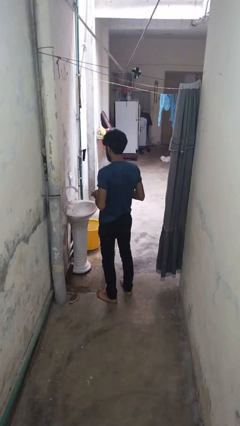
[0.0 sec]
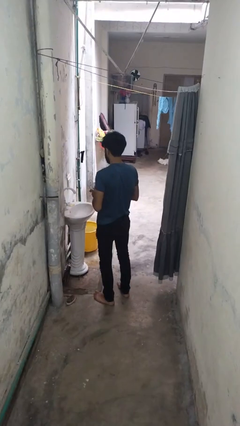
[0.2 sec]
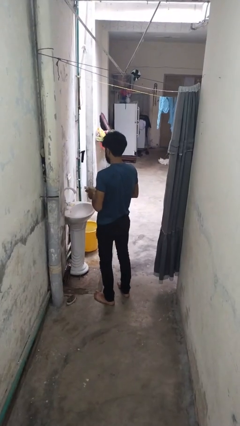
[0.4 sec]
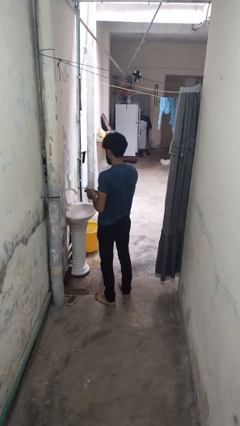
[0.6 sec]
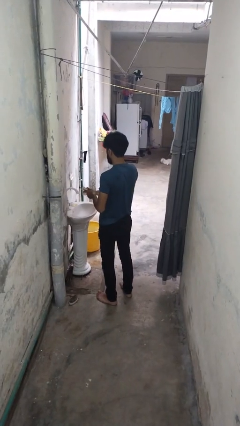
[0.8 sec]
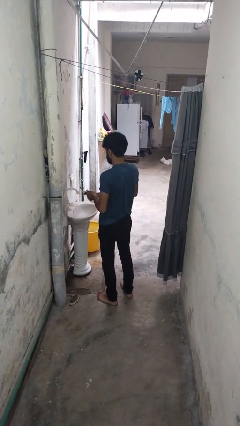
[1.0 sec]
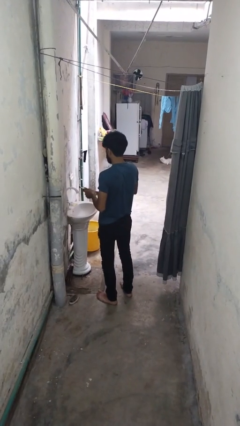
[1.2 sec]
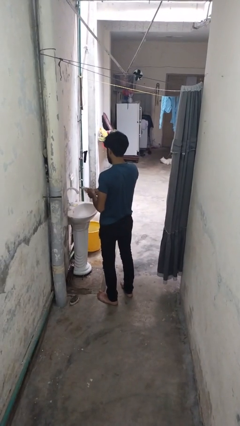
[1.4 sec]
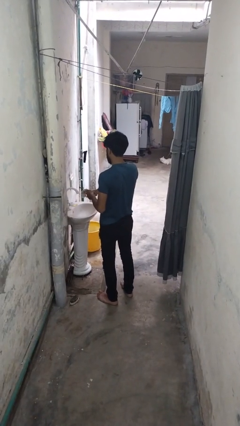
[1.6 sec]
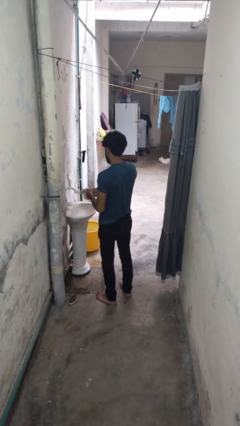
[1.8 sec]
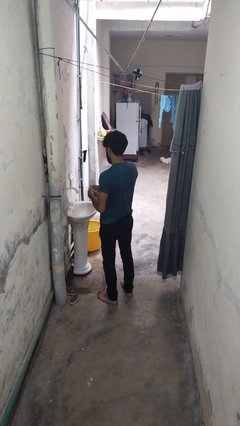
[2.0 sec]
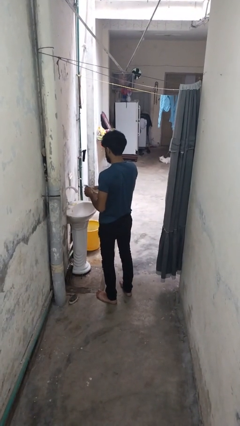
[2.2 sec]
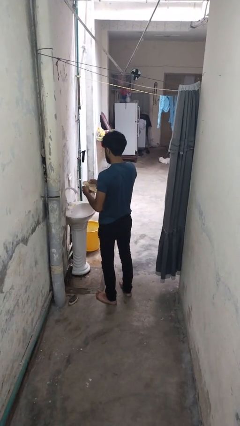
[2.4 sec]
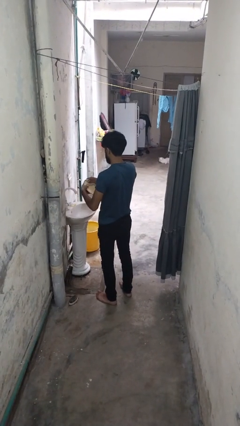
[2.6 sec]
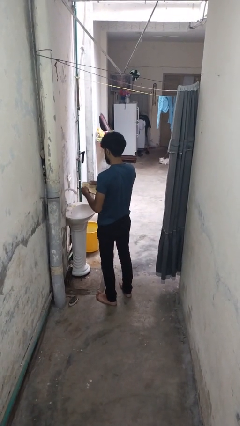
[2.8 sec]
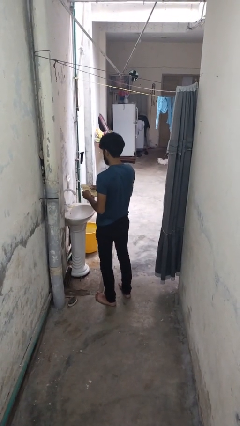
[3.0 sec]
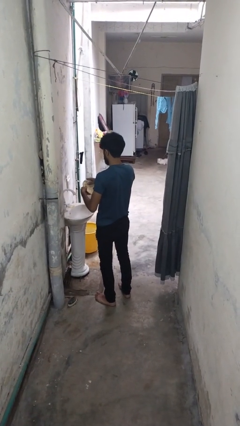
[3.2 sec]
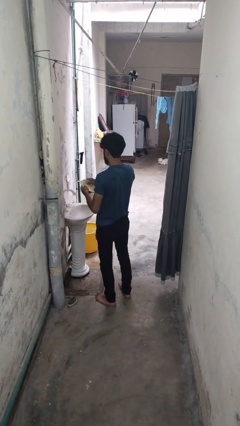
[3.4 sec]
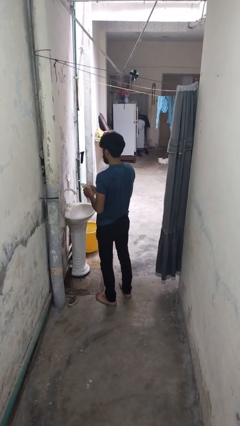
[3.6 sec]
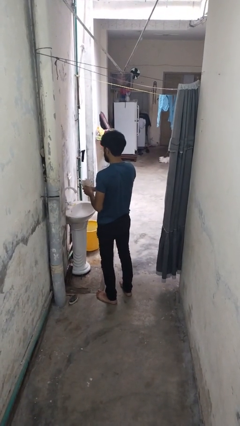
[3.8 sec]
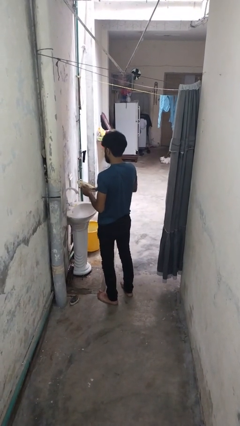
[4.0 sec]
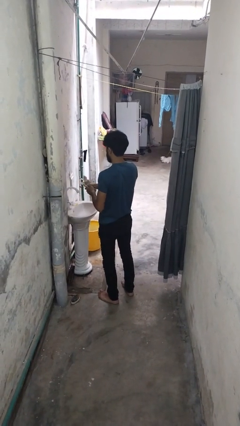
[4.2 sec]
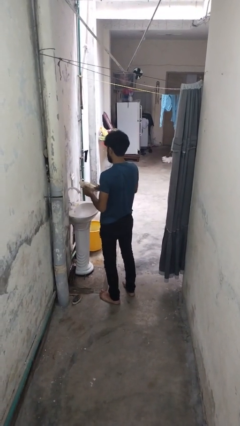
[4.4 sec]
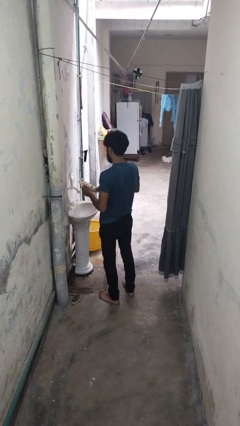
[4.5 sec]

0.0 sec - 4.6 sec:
person dries dish

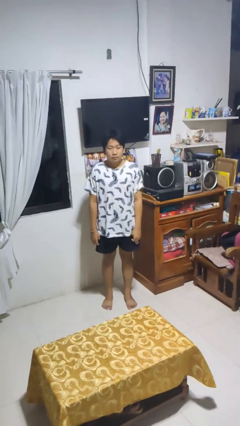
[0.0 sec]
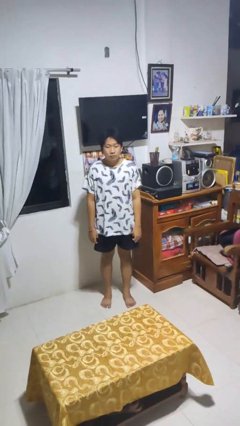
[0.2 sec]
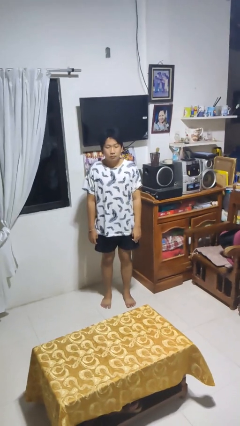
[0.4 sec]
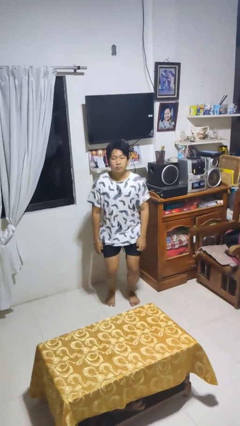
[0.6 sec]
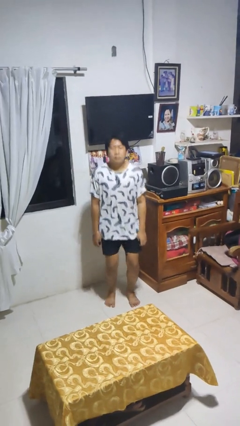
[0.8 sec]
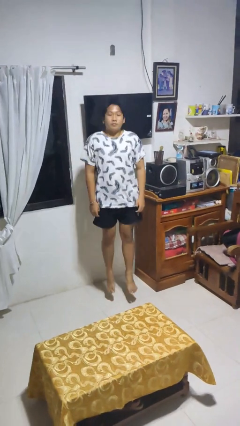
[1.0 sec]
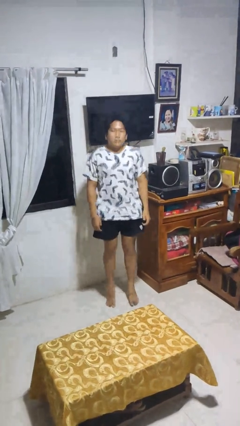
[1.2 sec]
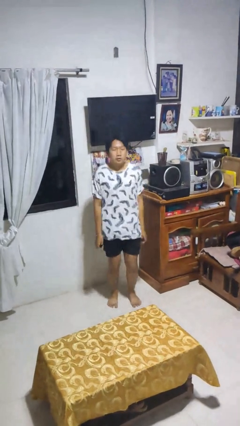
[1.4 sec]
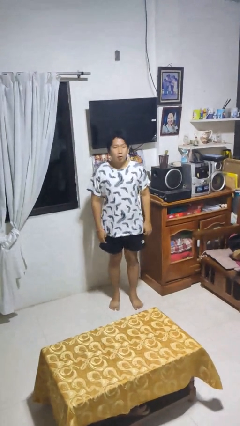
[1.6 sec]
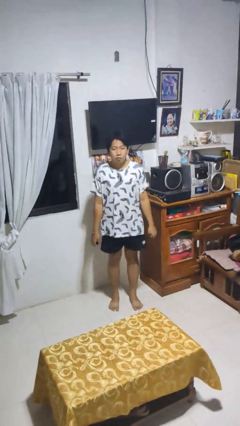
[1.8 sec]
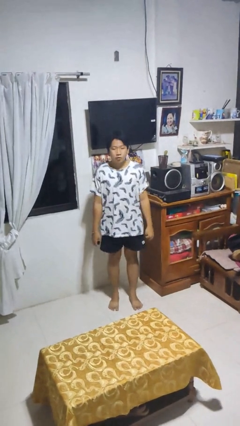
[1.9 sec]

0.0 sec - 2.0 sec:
person jumps

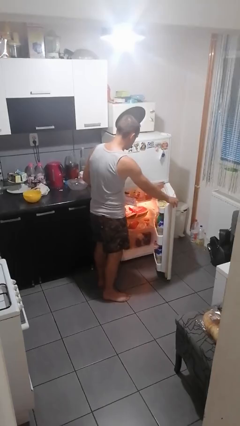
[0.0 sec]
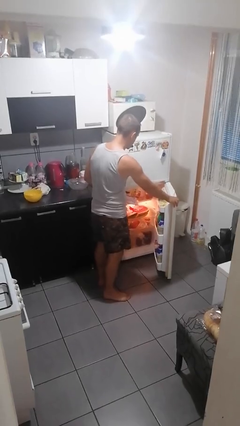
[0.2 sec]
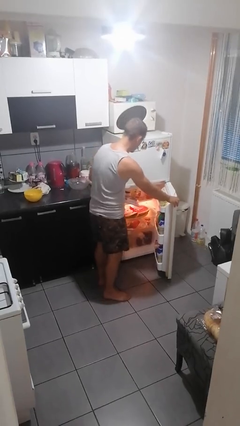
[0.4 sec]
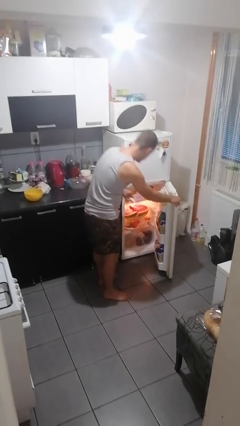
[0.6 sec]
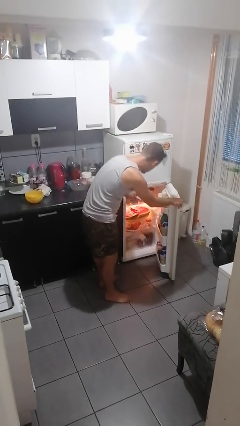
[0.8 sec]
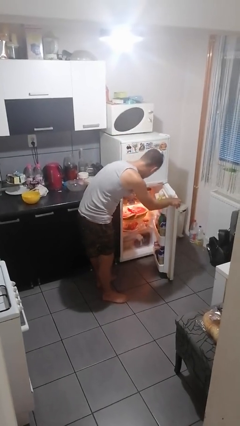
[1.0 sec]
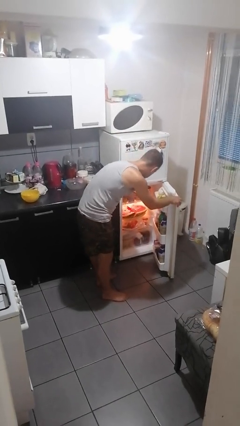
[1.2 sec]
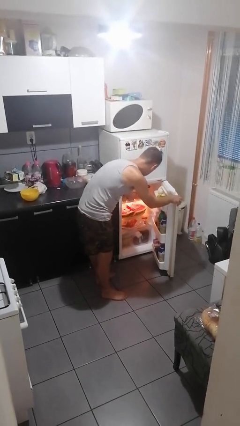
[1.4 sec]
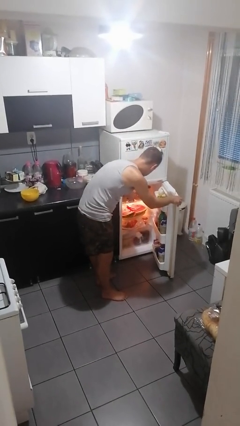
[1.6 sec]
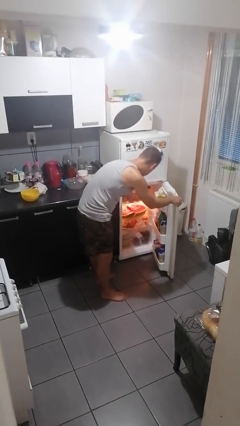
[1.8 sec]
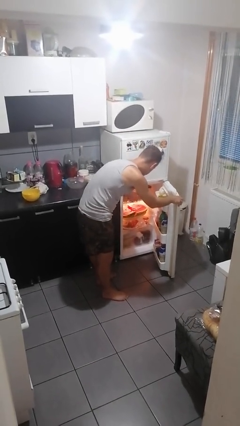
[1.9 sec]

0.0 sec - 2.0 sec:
person puts object into refrigerator

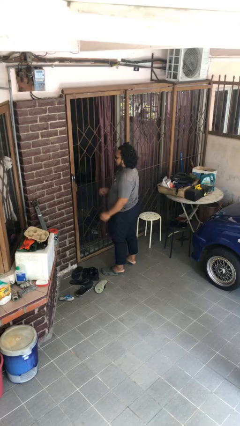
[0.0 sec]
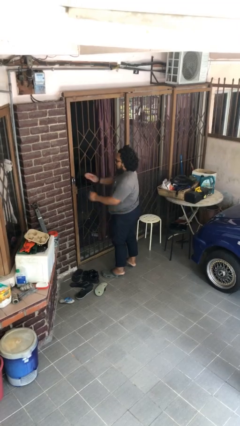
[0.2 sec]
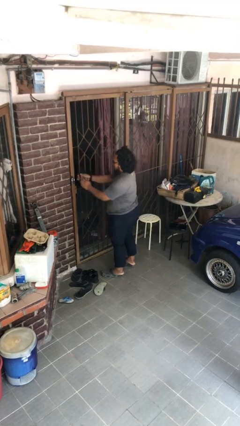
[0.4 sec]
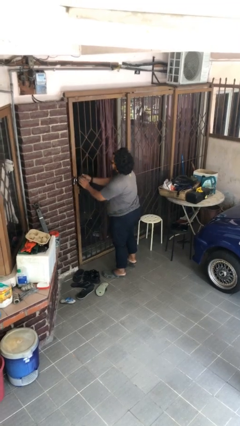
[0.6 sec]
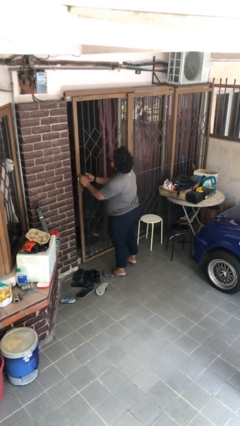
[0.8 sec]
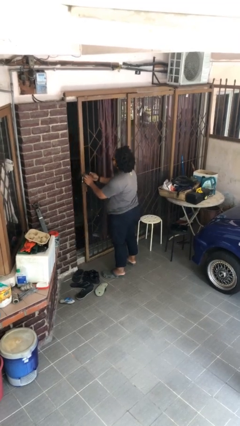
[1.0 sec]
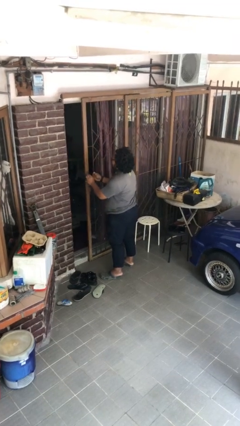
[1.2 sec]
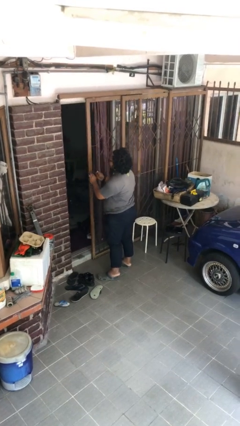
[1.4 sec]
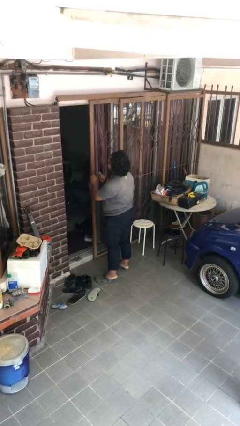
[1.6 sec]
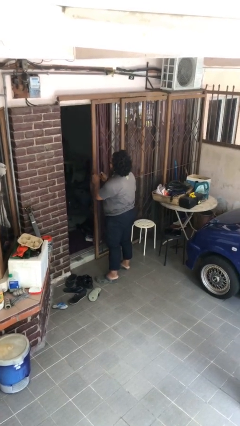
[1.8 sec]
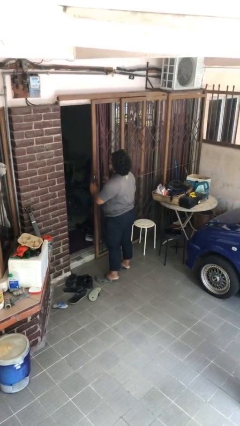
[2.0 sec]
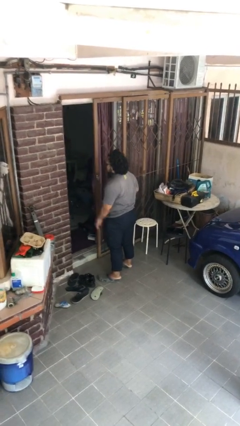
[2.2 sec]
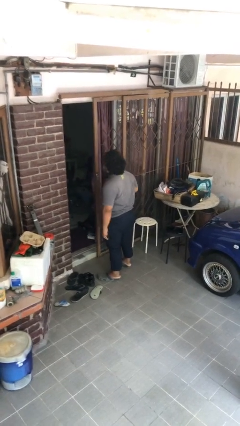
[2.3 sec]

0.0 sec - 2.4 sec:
person opens facility door

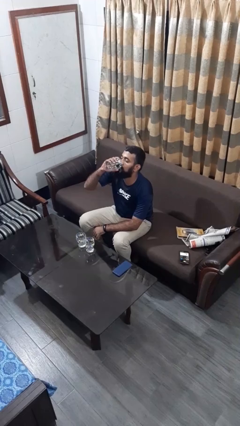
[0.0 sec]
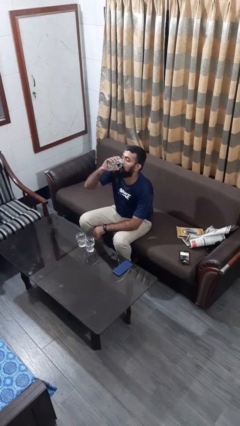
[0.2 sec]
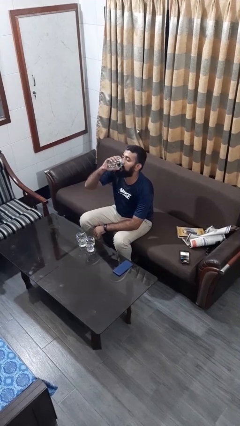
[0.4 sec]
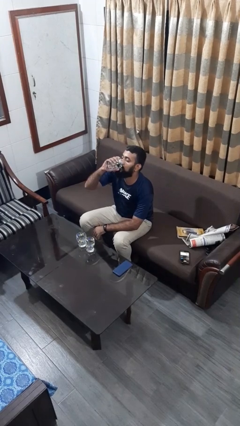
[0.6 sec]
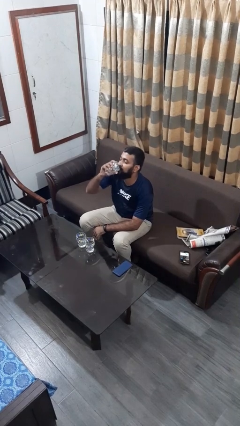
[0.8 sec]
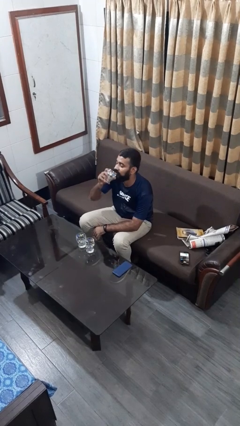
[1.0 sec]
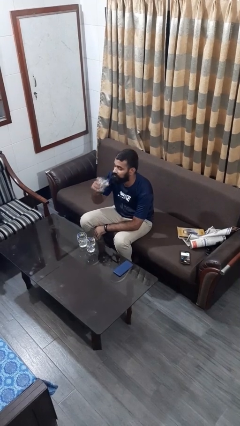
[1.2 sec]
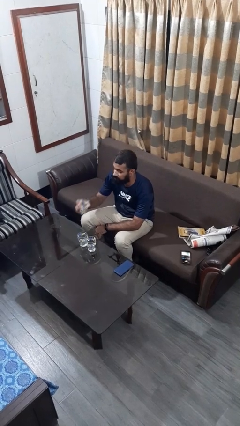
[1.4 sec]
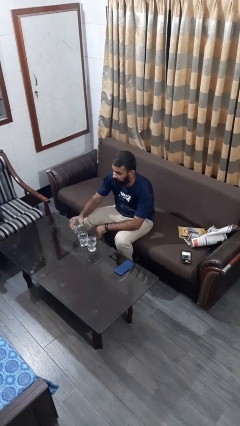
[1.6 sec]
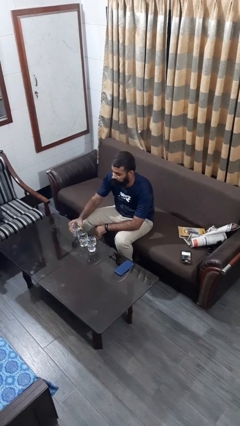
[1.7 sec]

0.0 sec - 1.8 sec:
person puts down object on table

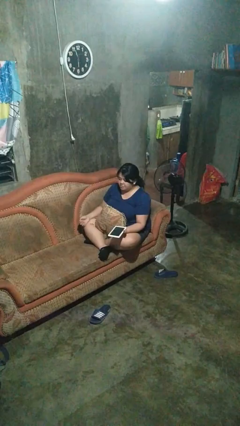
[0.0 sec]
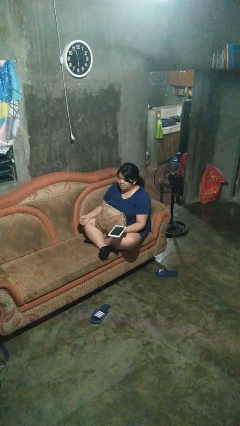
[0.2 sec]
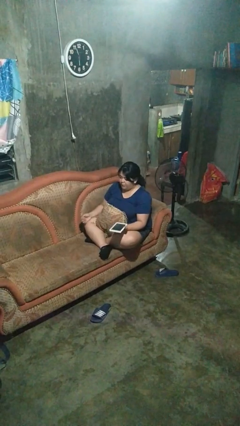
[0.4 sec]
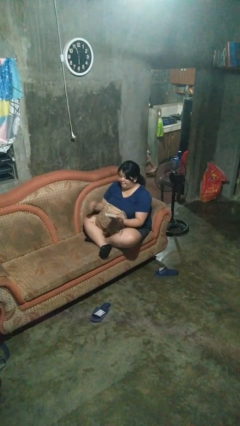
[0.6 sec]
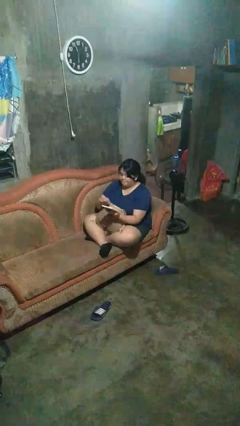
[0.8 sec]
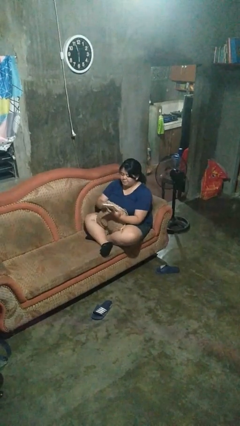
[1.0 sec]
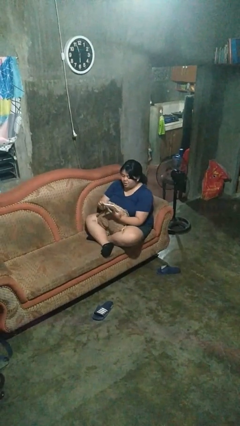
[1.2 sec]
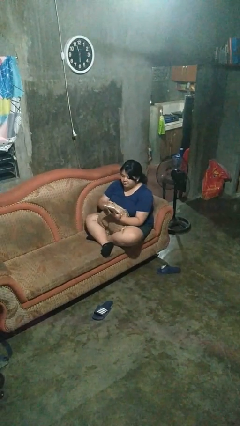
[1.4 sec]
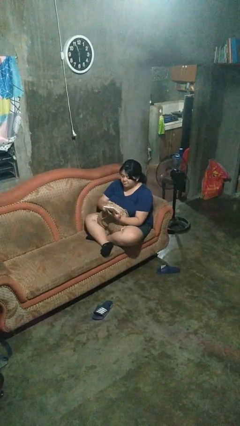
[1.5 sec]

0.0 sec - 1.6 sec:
person interacts with tablet

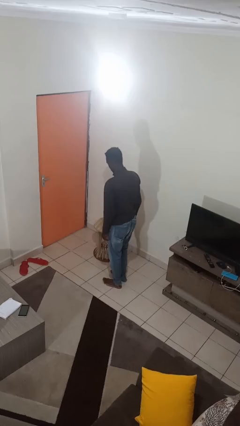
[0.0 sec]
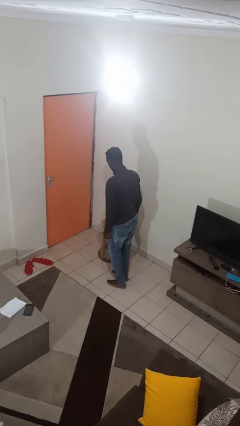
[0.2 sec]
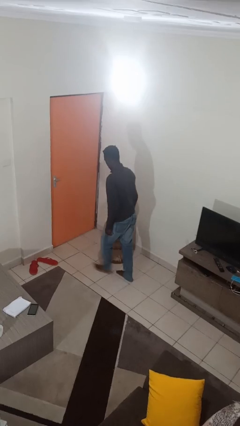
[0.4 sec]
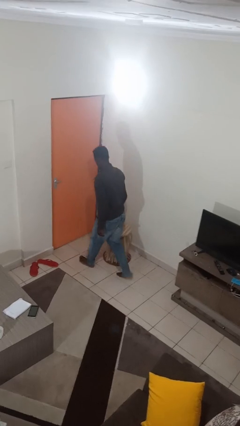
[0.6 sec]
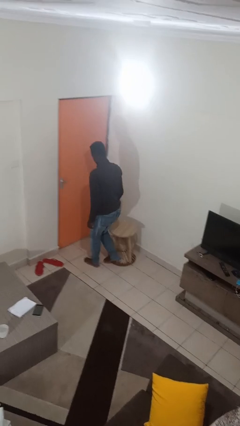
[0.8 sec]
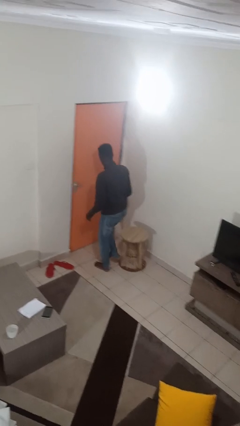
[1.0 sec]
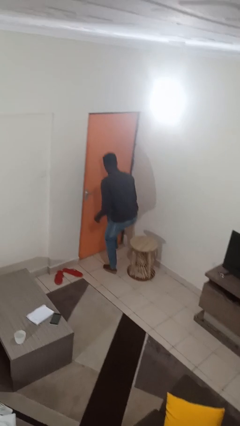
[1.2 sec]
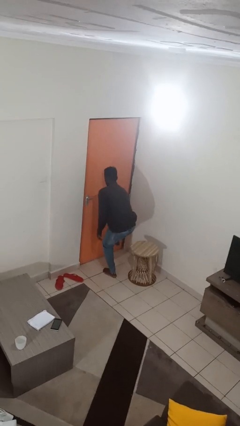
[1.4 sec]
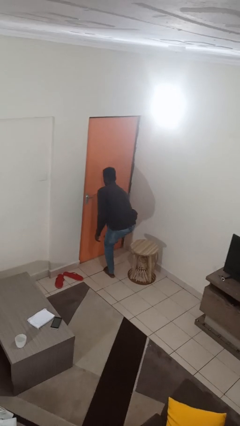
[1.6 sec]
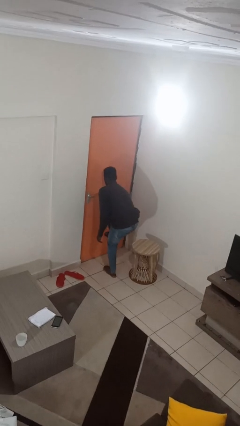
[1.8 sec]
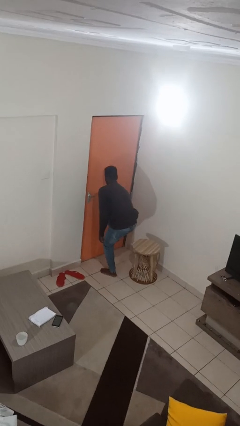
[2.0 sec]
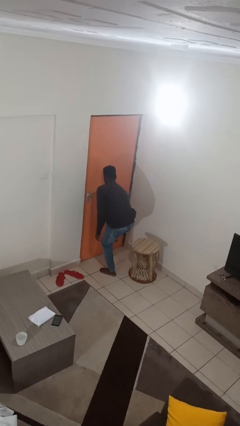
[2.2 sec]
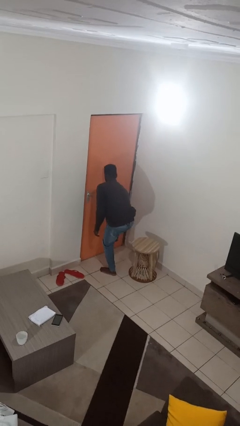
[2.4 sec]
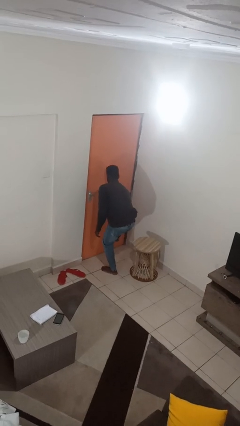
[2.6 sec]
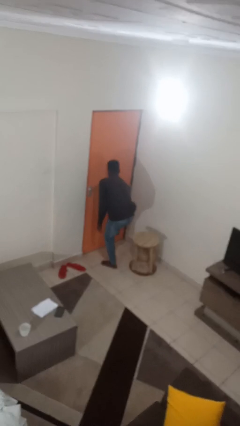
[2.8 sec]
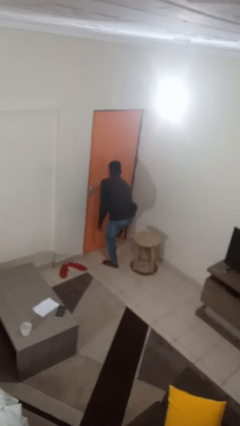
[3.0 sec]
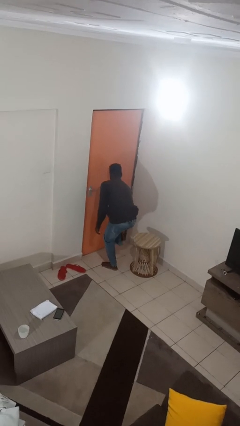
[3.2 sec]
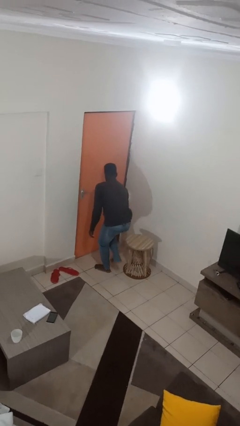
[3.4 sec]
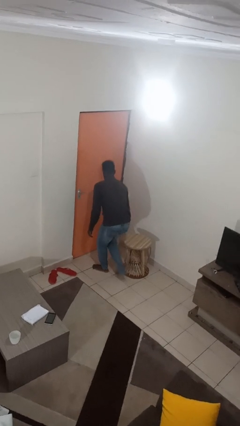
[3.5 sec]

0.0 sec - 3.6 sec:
person stubs toe
